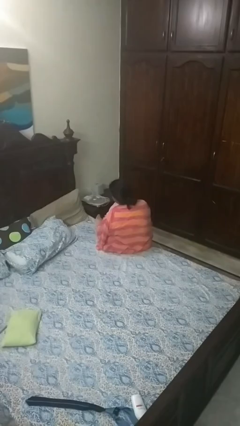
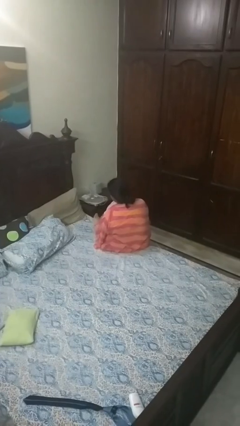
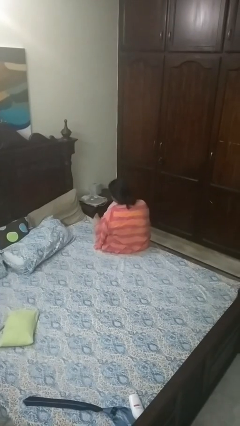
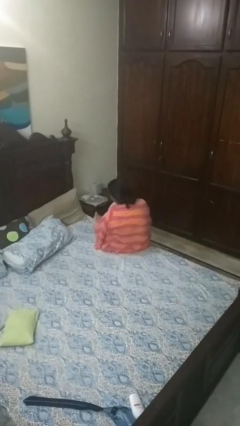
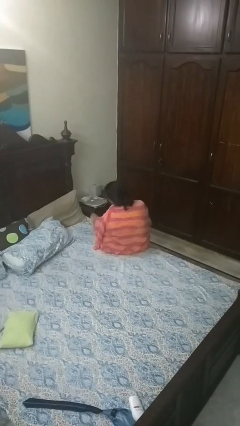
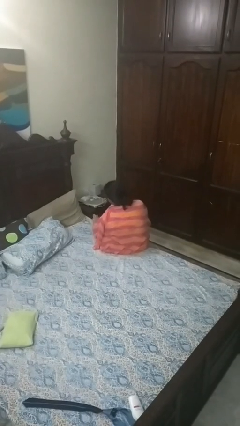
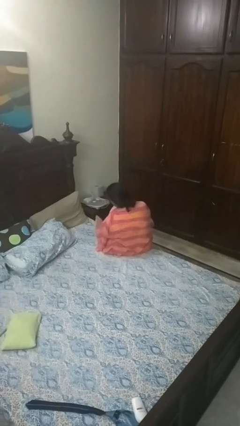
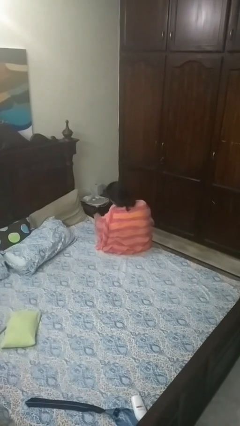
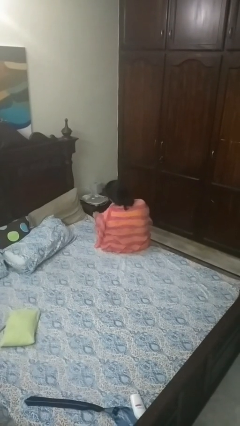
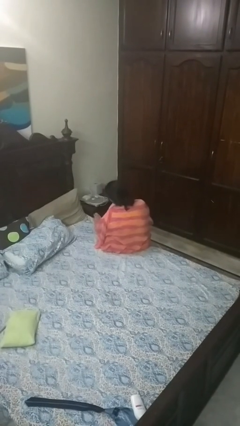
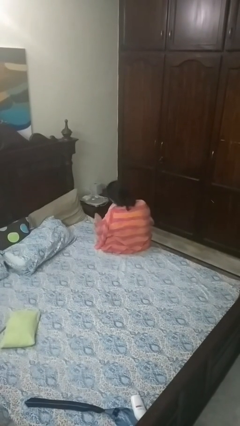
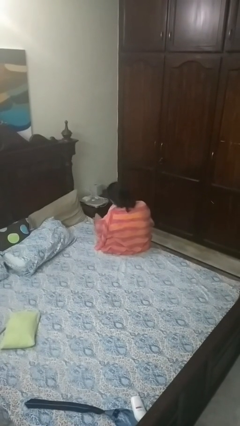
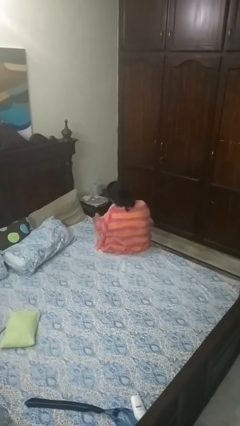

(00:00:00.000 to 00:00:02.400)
person rubs foot

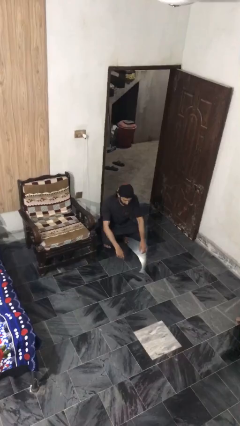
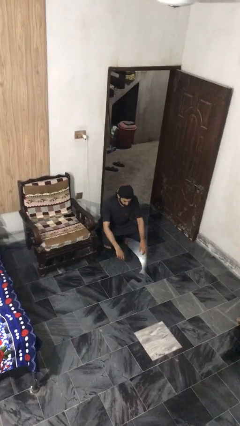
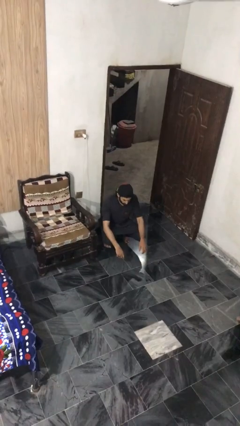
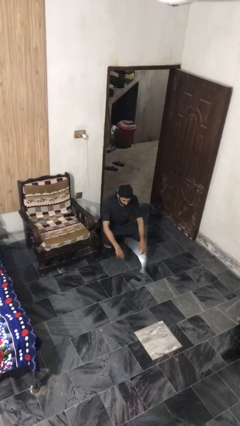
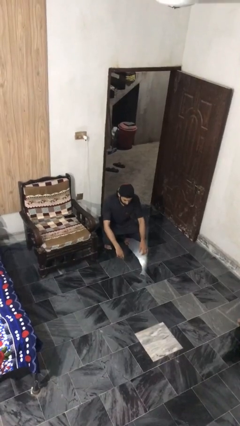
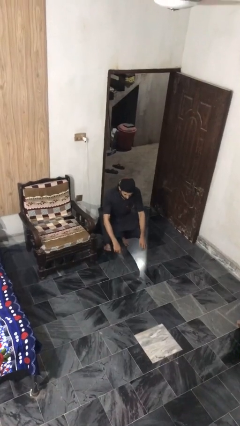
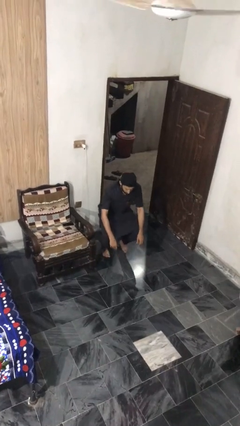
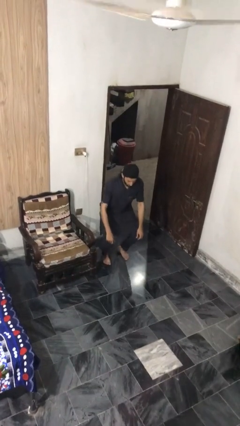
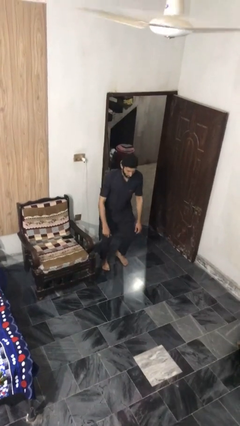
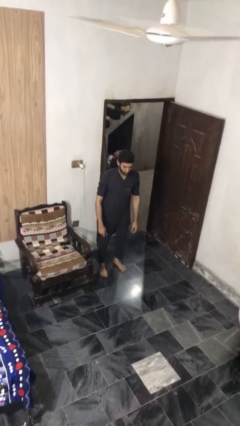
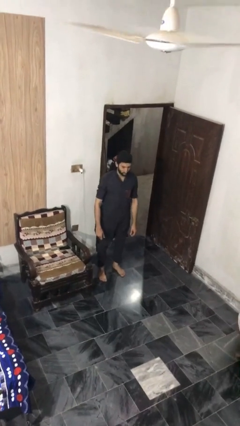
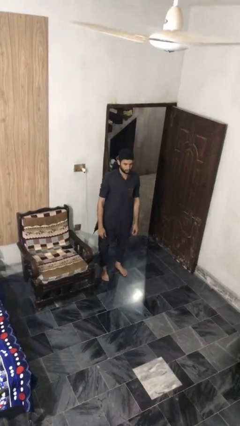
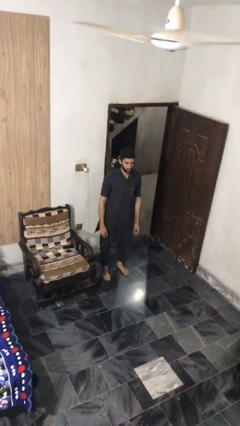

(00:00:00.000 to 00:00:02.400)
person stands up

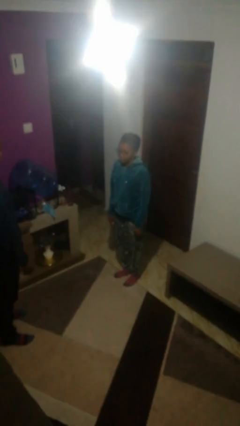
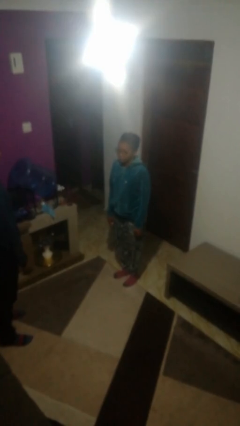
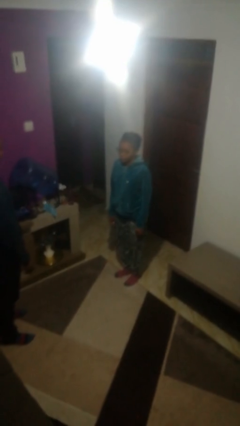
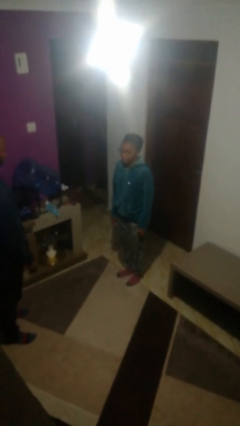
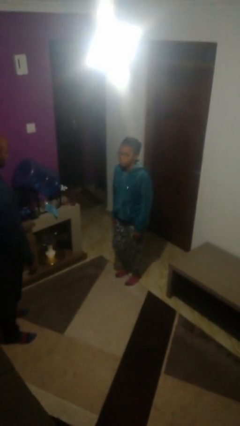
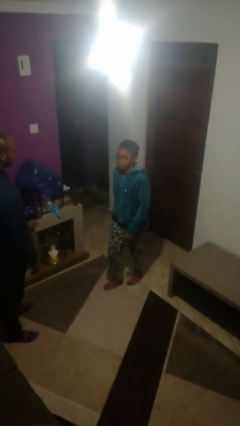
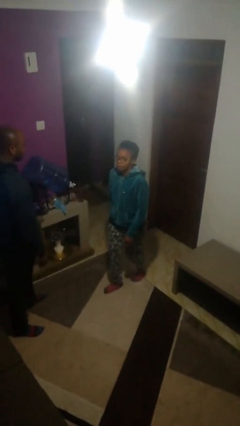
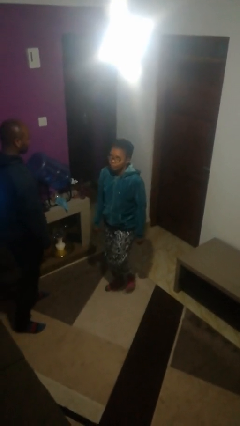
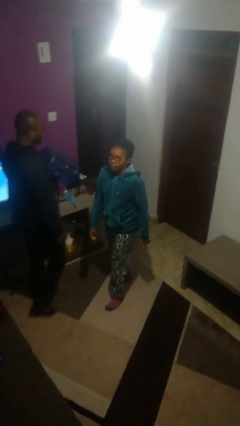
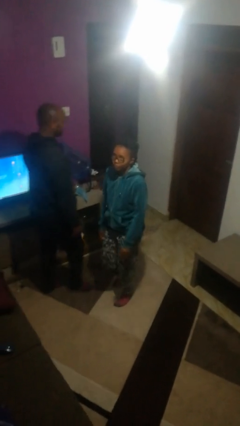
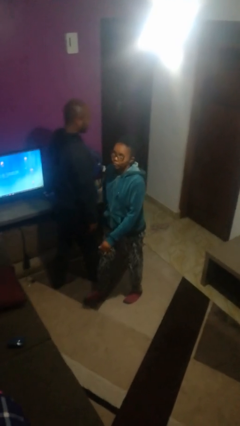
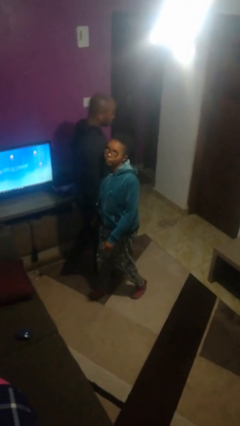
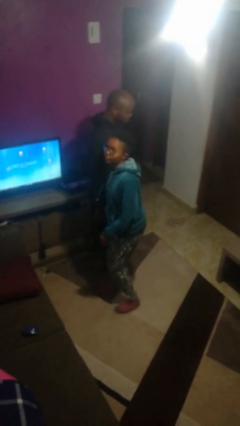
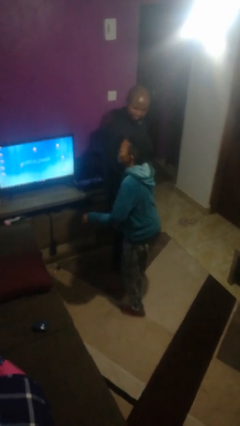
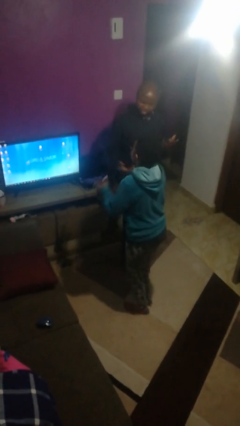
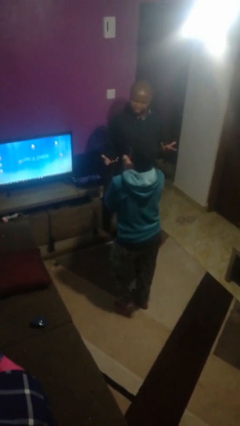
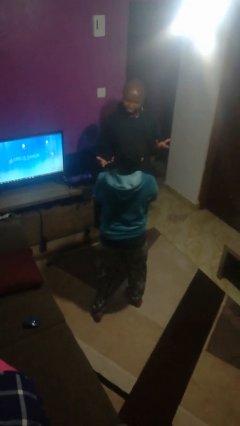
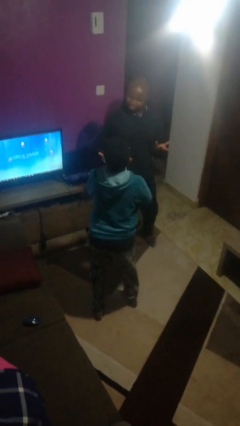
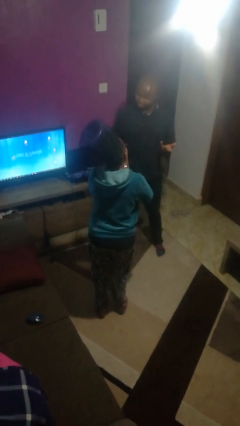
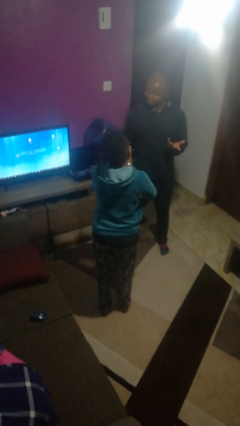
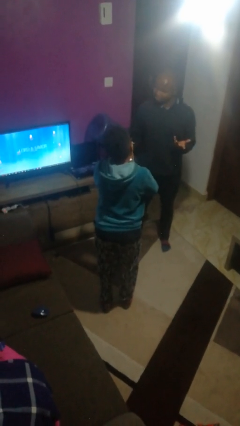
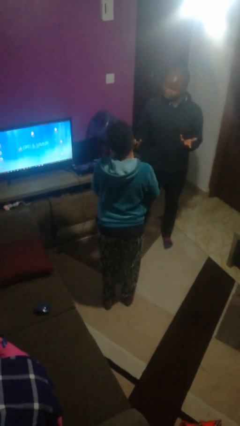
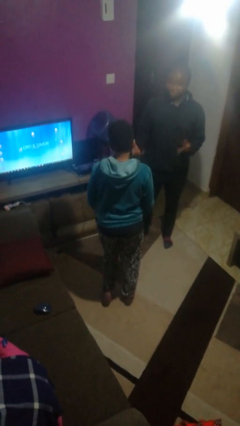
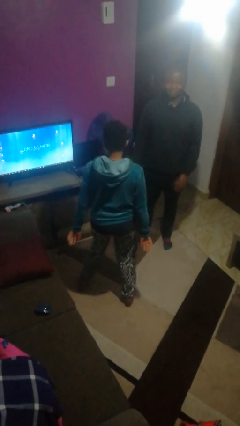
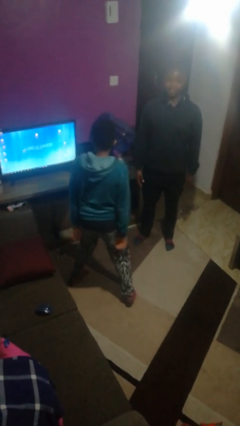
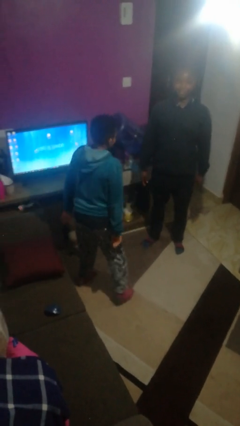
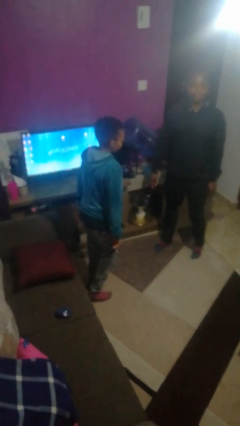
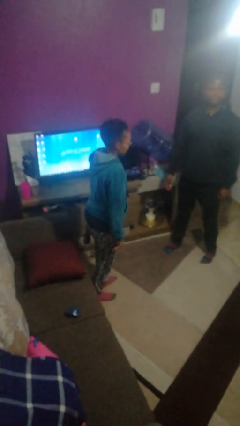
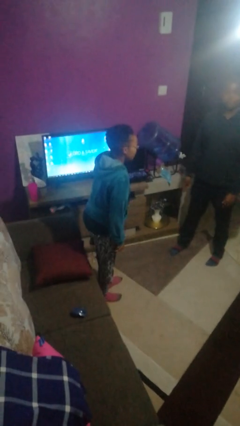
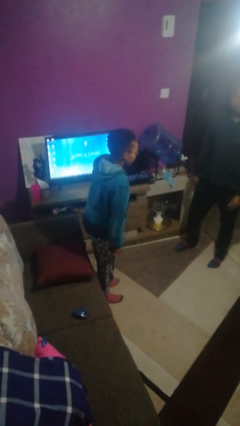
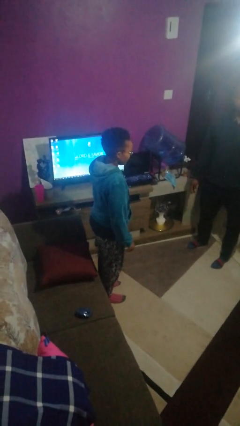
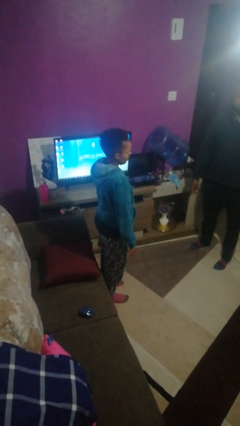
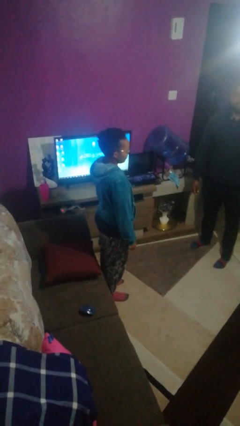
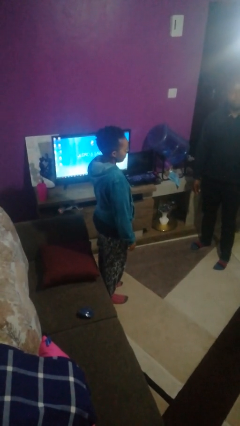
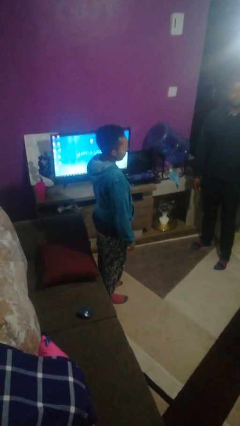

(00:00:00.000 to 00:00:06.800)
person bumps into person

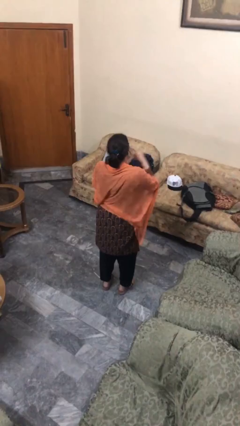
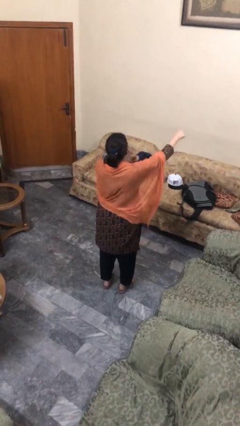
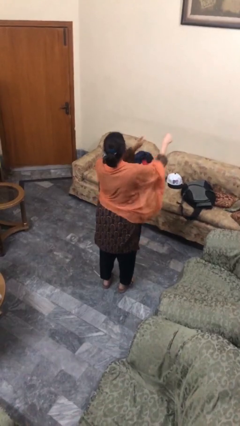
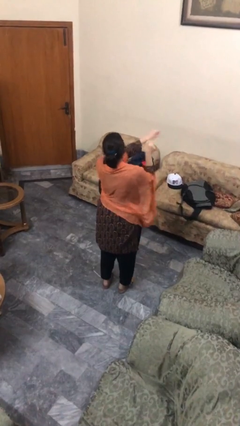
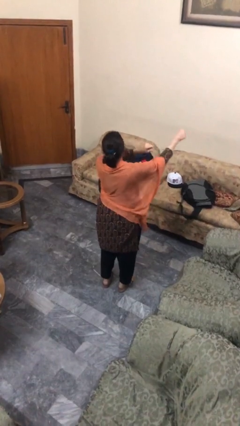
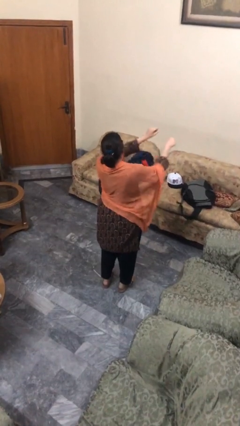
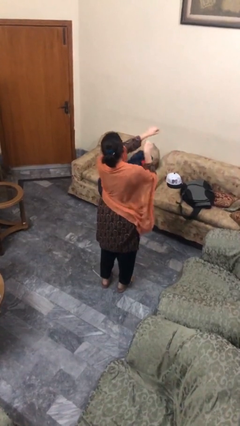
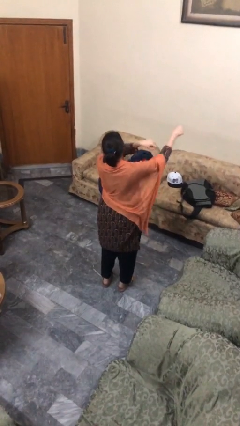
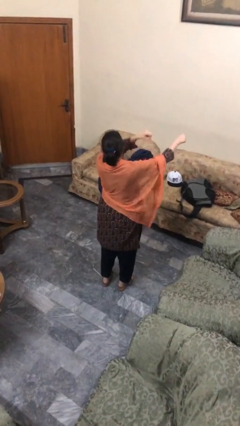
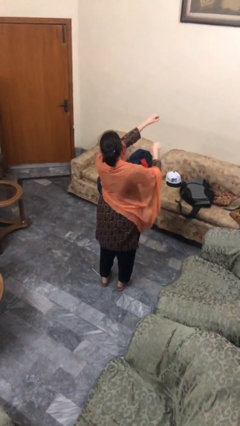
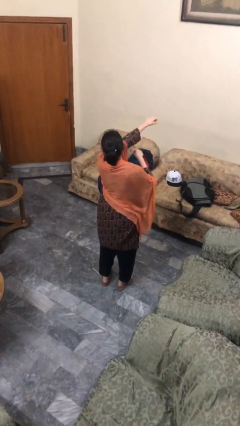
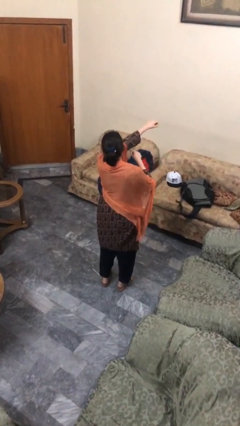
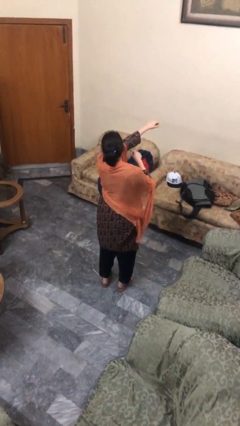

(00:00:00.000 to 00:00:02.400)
person punches

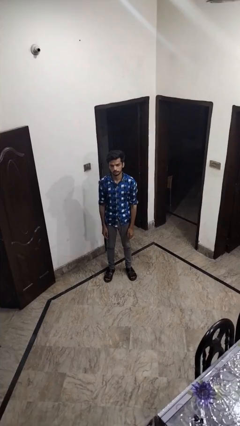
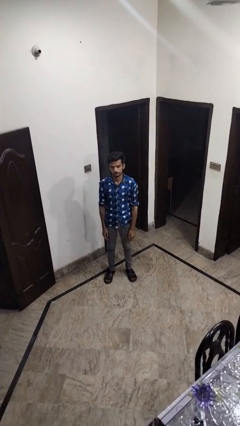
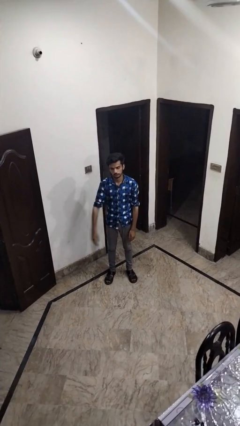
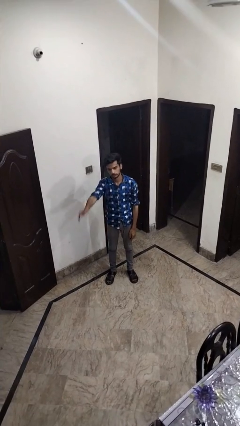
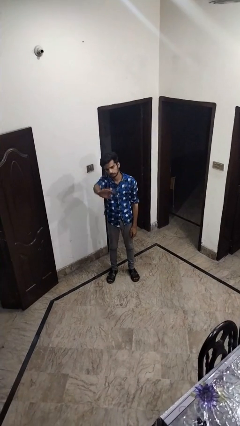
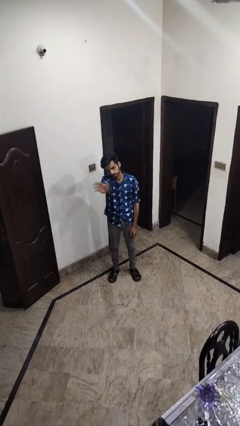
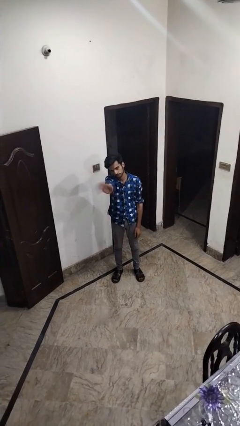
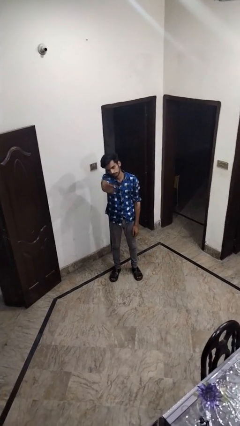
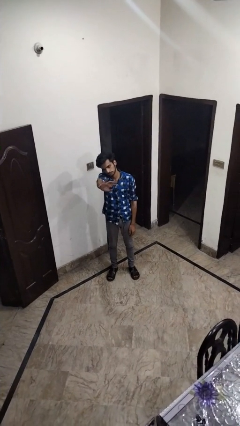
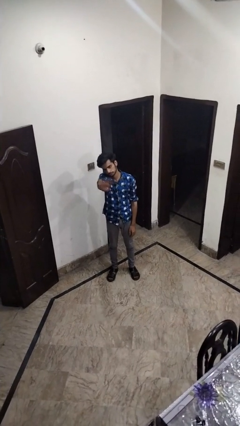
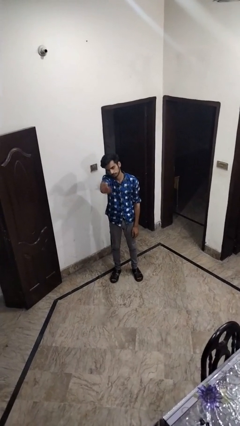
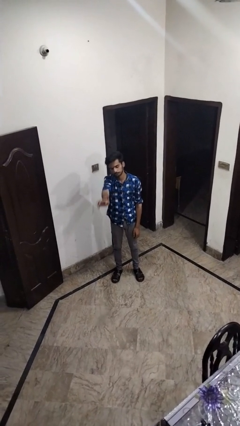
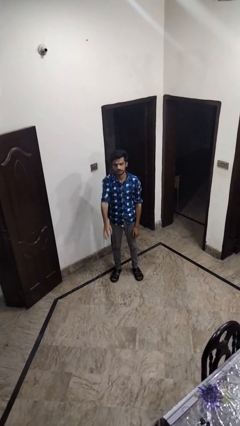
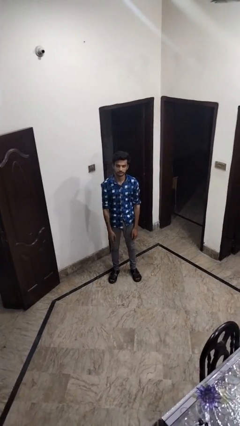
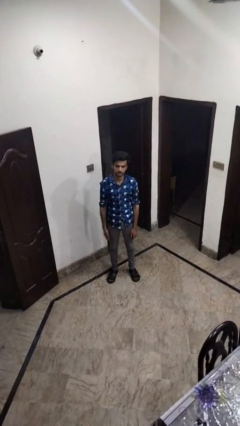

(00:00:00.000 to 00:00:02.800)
person waves at person

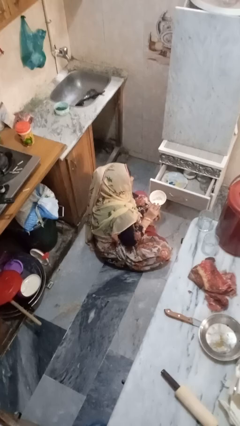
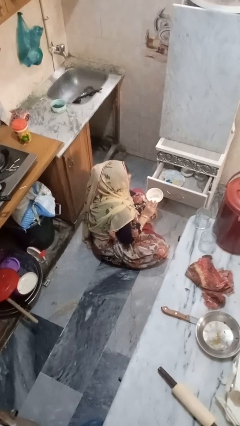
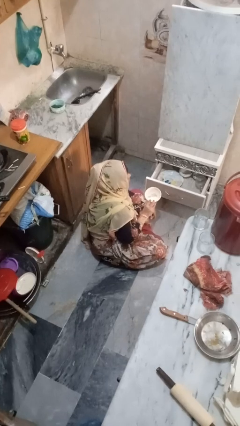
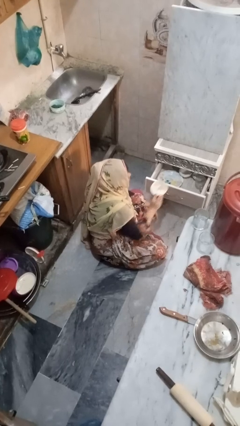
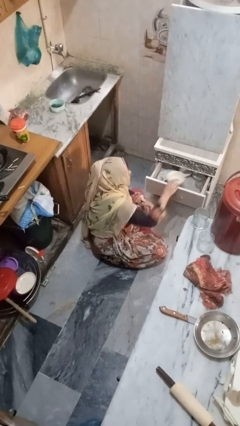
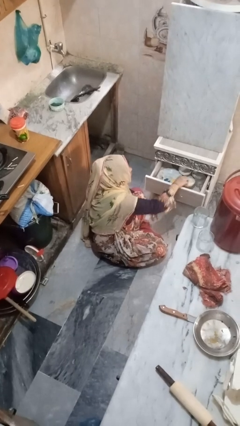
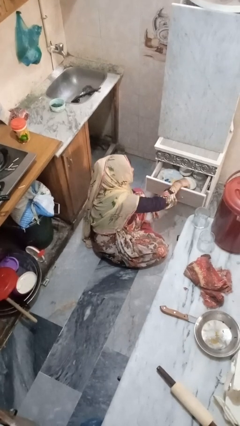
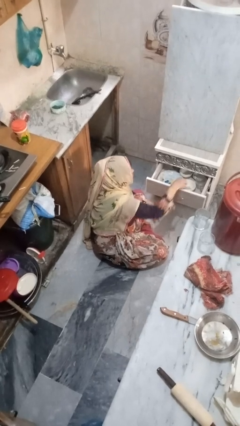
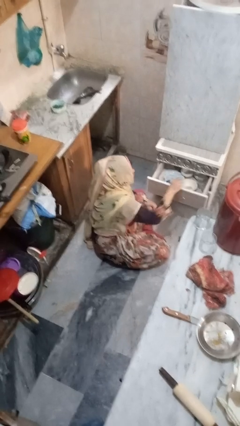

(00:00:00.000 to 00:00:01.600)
person puts object into kitchen drawer
